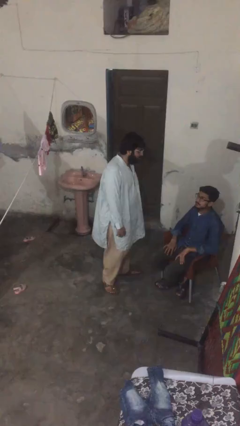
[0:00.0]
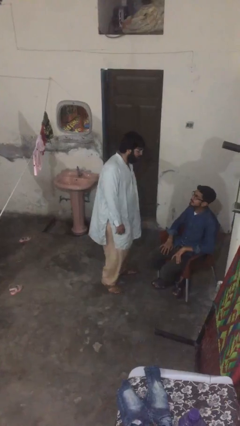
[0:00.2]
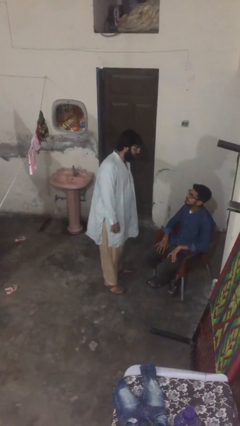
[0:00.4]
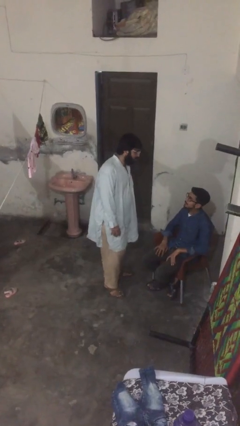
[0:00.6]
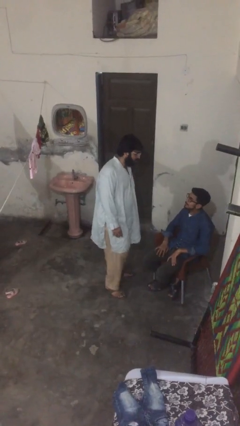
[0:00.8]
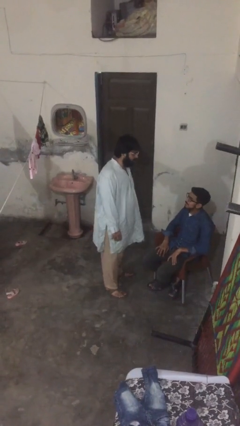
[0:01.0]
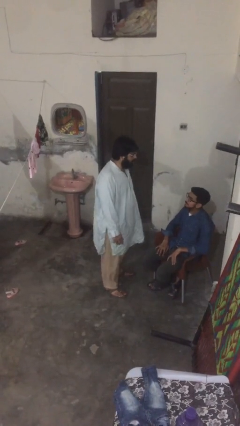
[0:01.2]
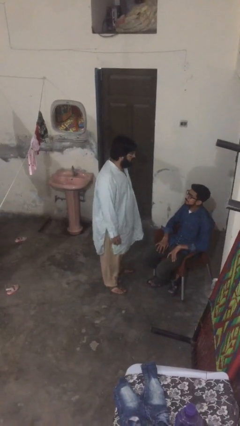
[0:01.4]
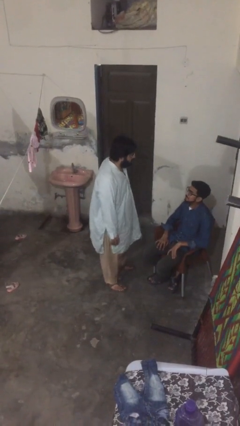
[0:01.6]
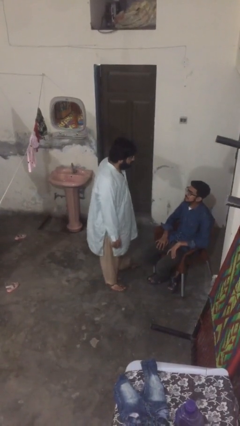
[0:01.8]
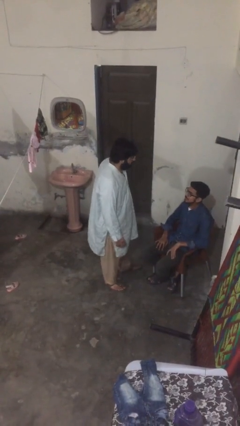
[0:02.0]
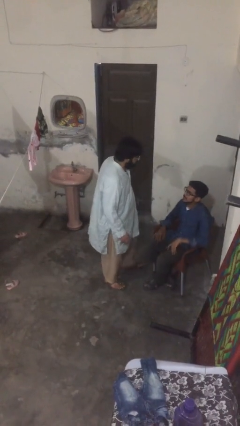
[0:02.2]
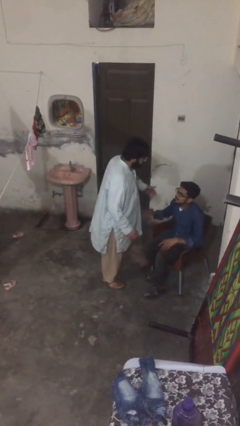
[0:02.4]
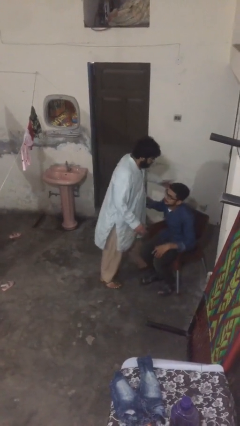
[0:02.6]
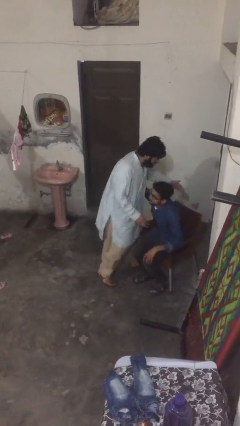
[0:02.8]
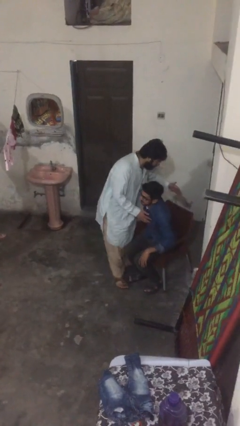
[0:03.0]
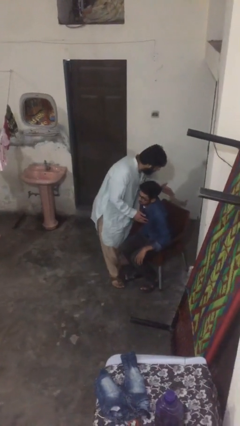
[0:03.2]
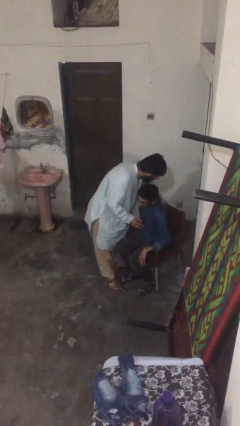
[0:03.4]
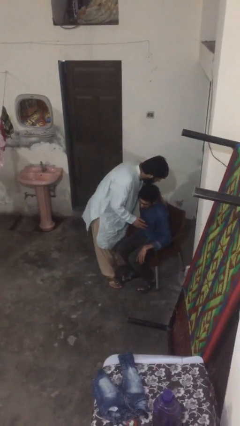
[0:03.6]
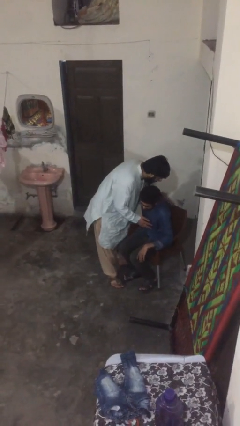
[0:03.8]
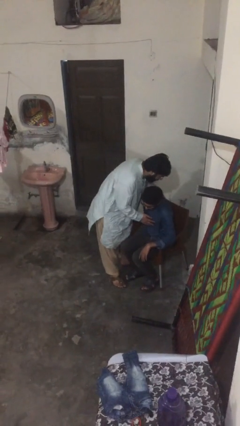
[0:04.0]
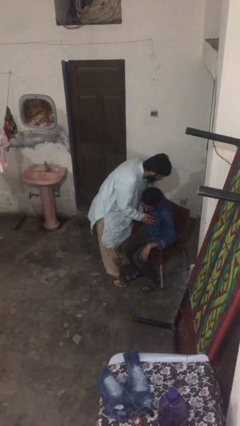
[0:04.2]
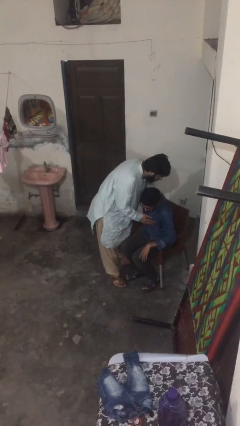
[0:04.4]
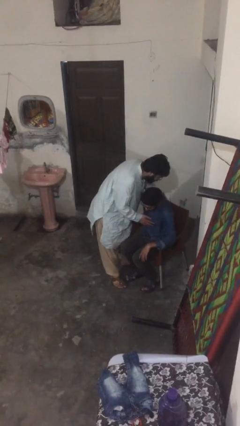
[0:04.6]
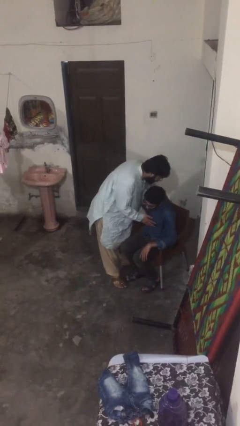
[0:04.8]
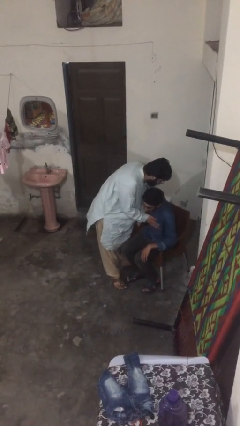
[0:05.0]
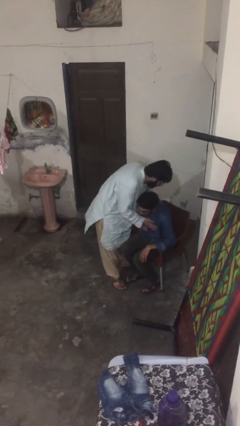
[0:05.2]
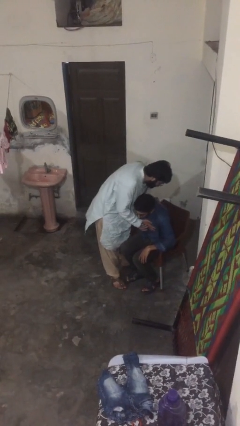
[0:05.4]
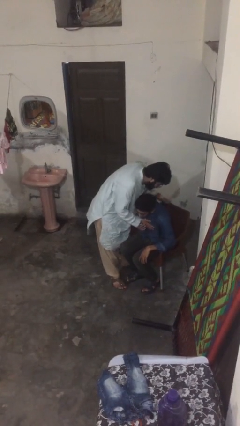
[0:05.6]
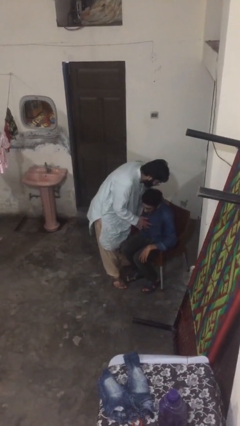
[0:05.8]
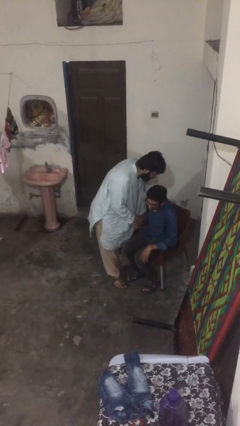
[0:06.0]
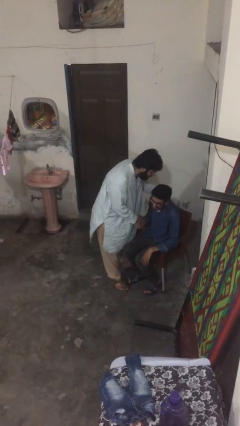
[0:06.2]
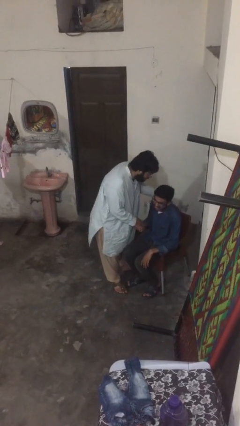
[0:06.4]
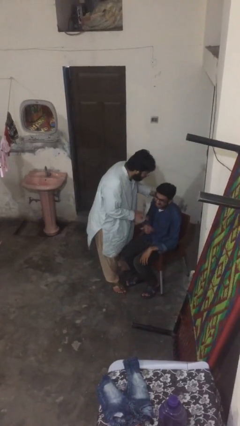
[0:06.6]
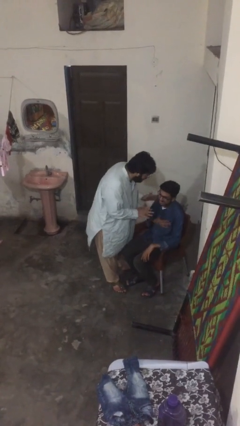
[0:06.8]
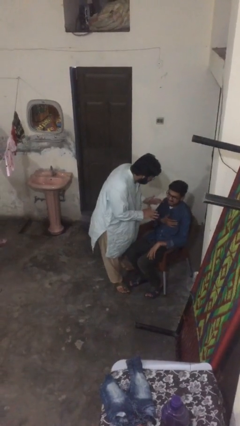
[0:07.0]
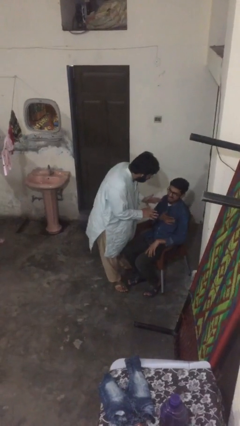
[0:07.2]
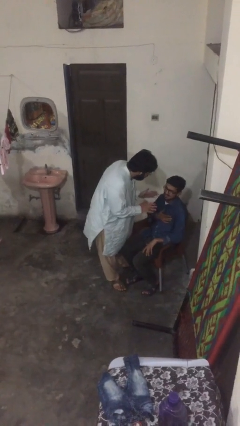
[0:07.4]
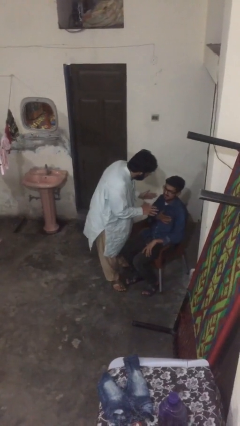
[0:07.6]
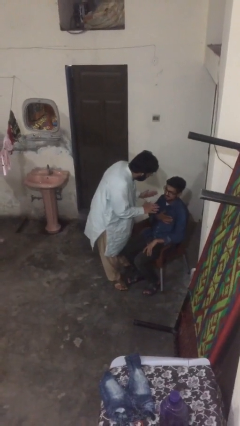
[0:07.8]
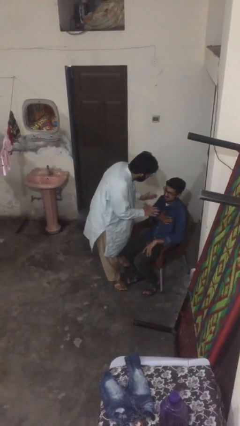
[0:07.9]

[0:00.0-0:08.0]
person embraces person

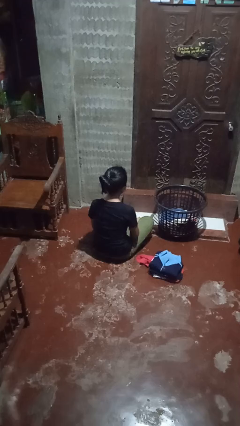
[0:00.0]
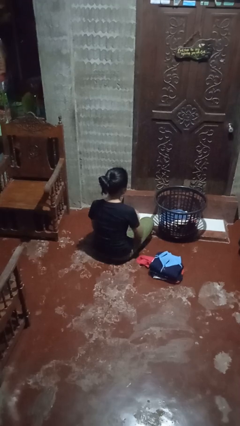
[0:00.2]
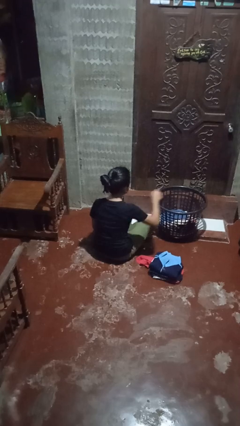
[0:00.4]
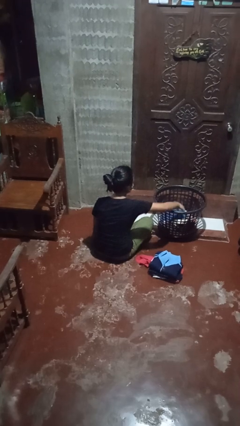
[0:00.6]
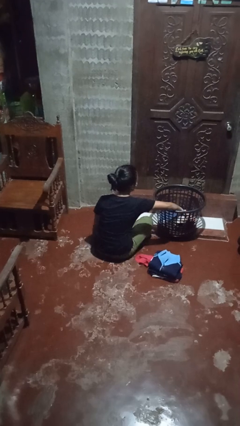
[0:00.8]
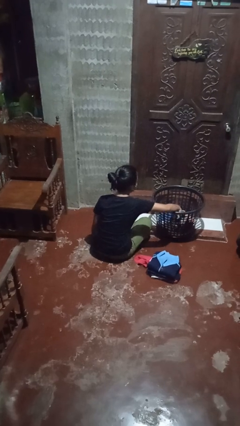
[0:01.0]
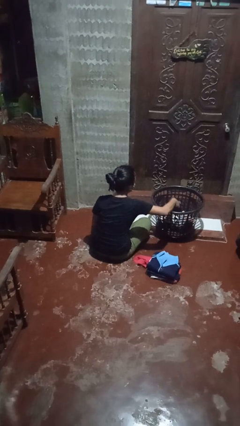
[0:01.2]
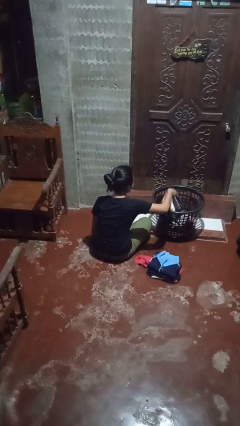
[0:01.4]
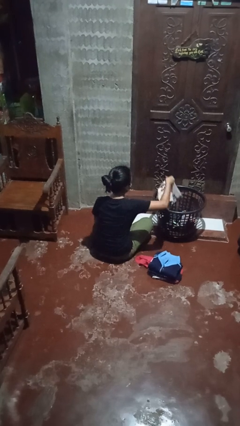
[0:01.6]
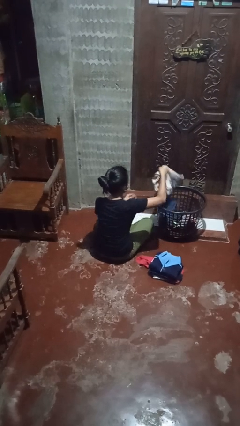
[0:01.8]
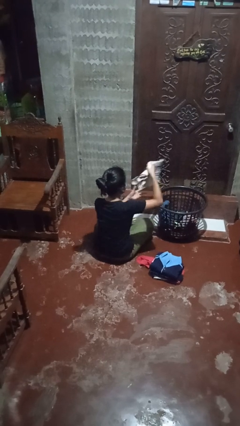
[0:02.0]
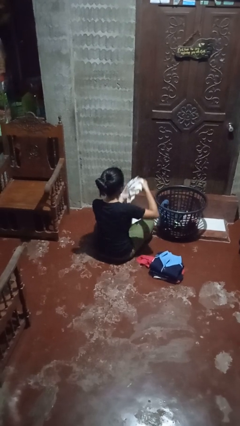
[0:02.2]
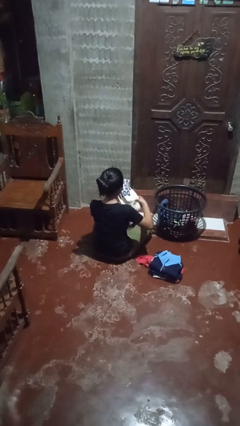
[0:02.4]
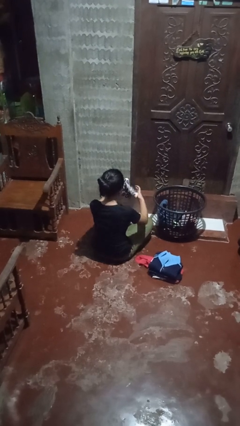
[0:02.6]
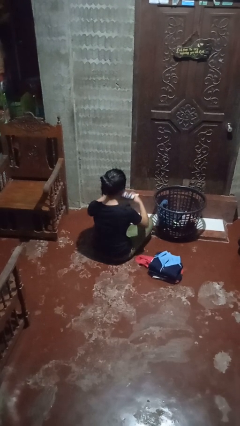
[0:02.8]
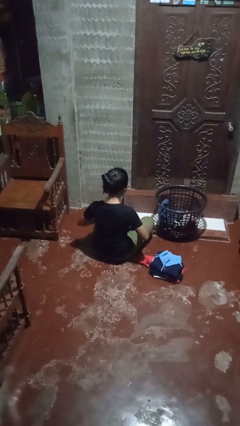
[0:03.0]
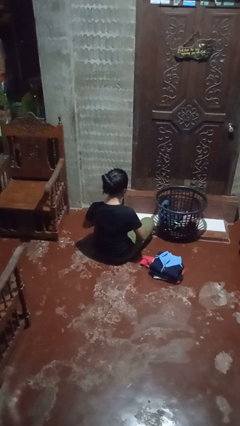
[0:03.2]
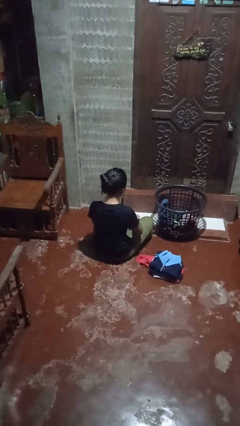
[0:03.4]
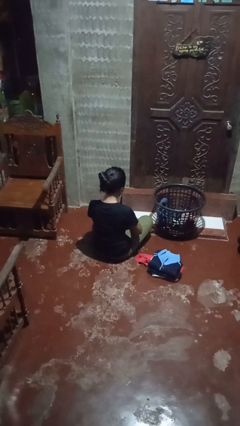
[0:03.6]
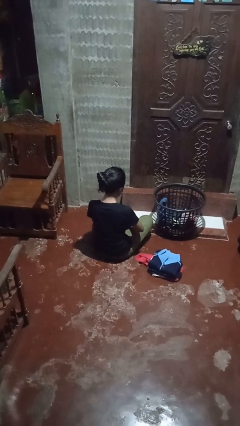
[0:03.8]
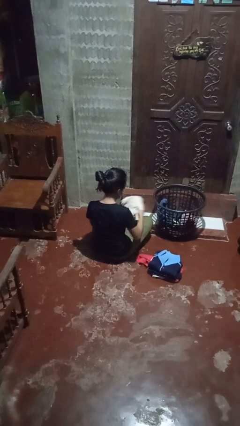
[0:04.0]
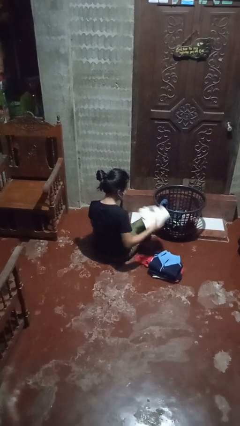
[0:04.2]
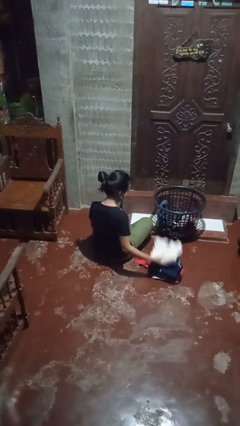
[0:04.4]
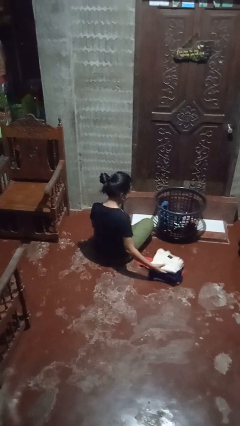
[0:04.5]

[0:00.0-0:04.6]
person folds shirt

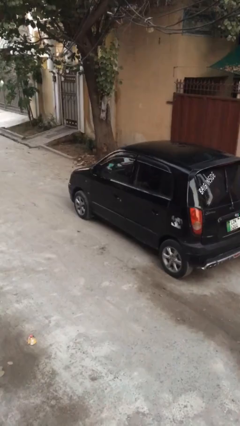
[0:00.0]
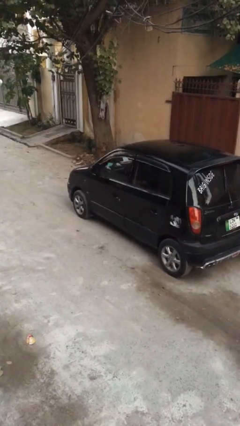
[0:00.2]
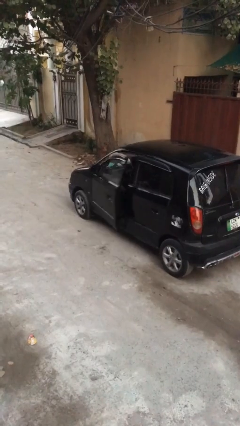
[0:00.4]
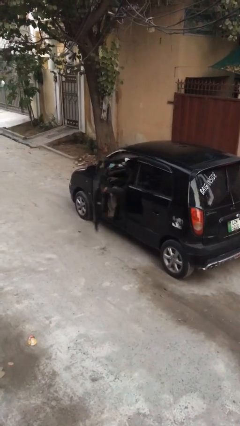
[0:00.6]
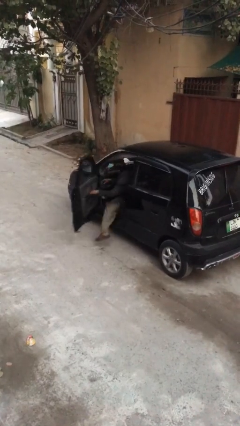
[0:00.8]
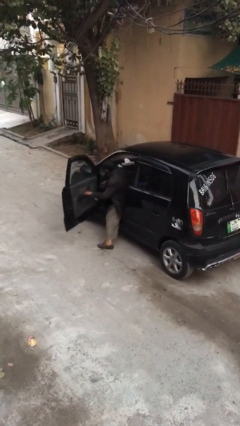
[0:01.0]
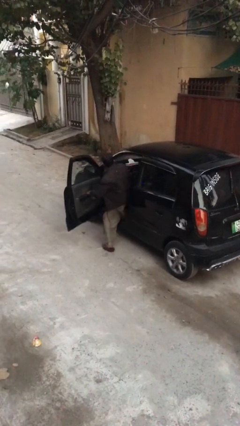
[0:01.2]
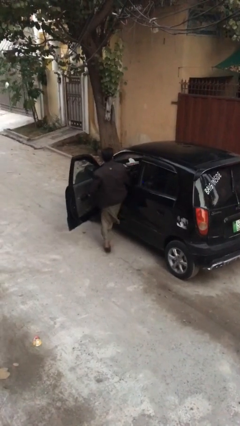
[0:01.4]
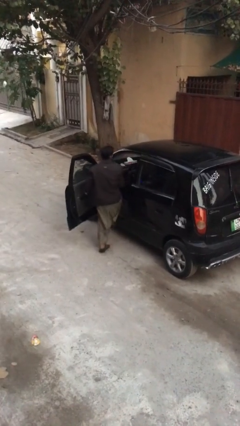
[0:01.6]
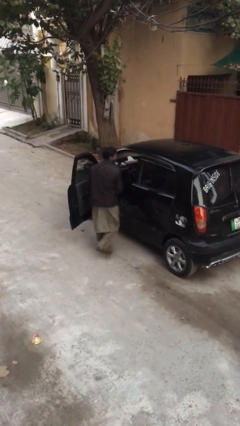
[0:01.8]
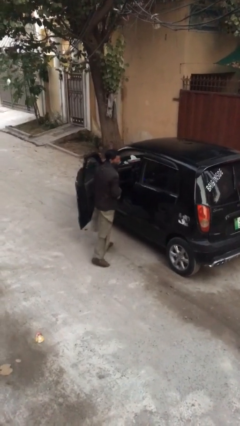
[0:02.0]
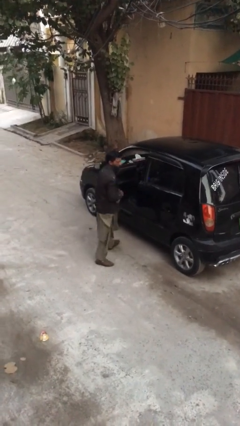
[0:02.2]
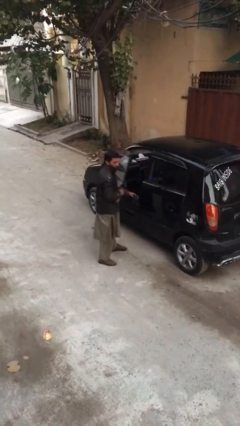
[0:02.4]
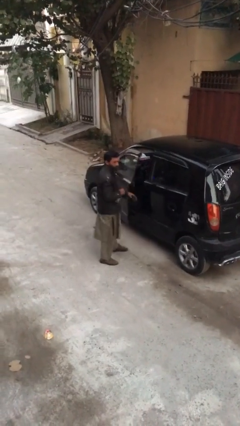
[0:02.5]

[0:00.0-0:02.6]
car drops off person

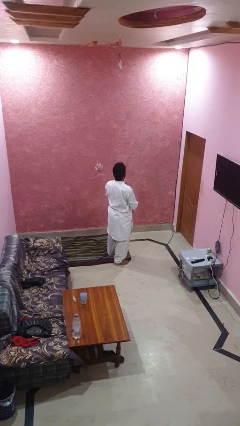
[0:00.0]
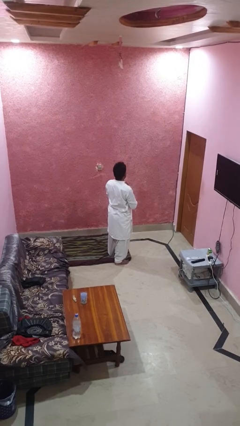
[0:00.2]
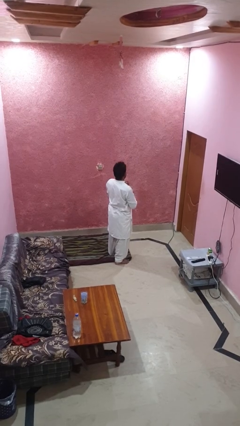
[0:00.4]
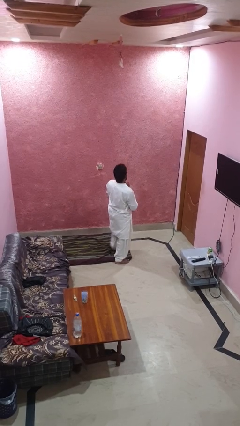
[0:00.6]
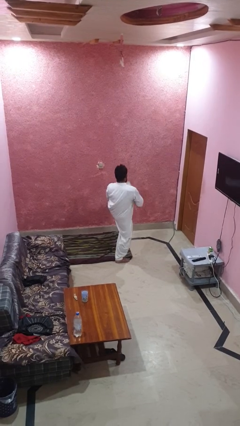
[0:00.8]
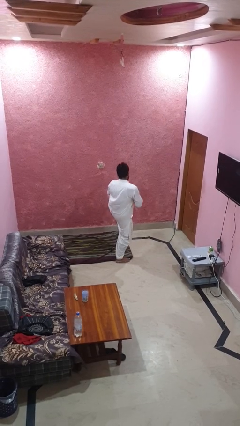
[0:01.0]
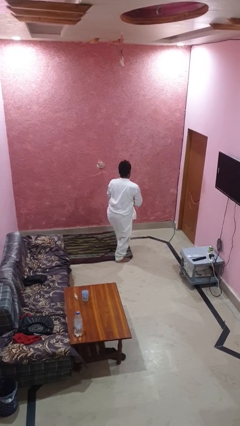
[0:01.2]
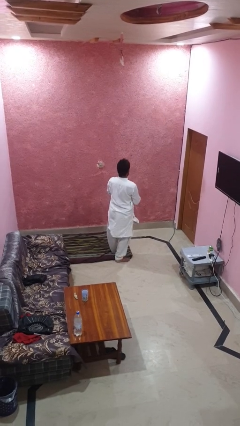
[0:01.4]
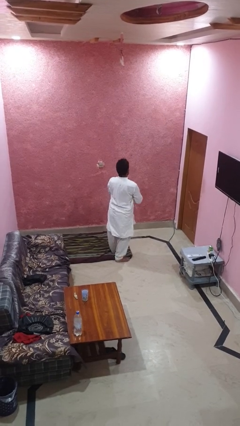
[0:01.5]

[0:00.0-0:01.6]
person karate kicks

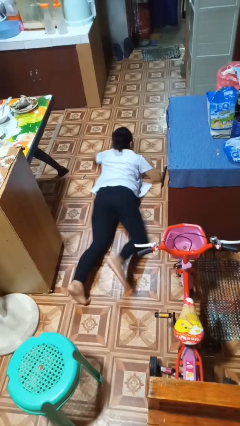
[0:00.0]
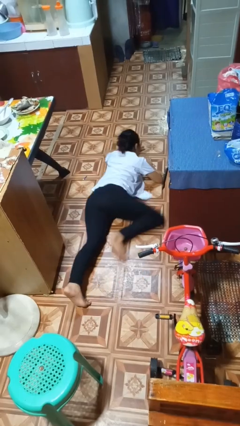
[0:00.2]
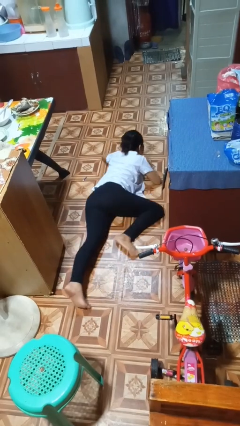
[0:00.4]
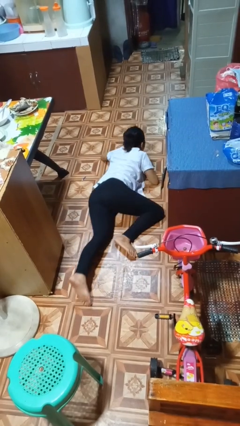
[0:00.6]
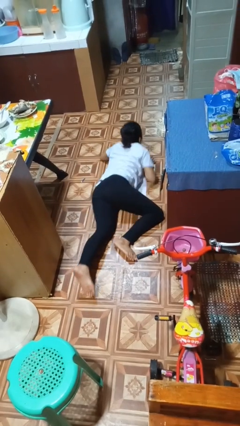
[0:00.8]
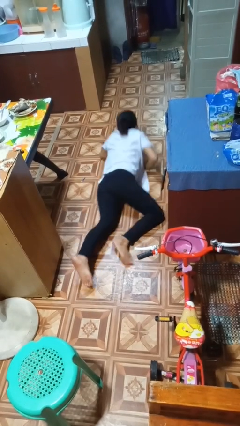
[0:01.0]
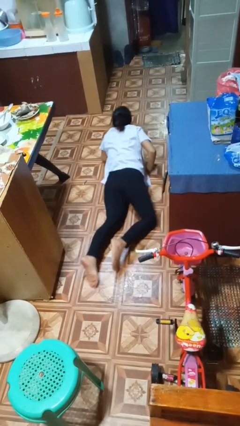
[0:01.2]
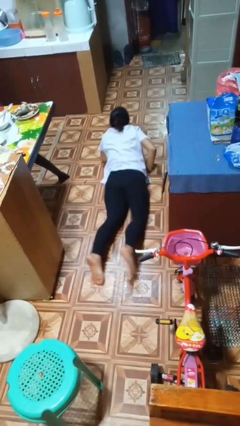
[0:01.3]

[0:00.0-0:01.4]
person crawls
